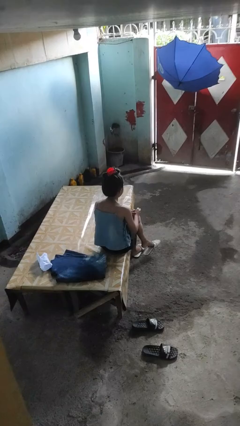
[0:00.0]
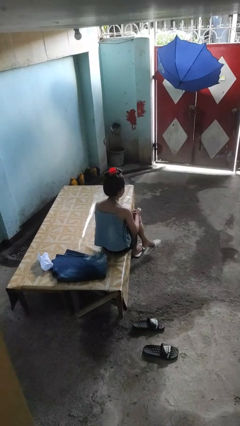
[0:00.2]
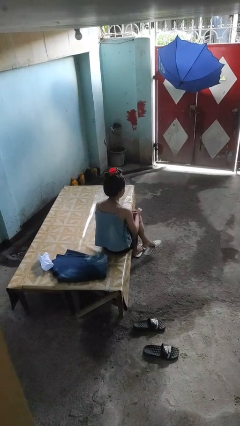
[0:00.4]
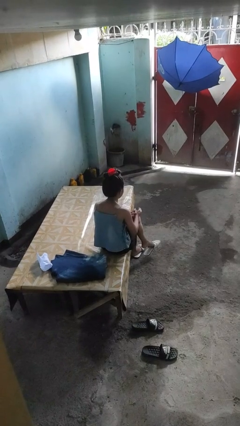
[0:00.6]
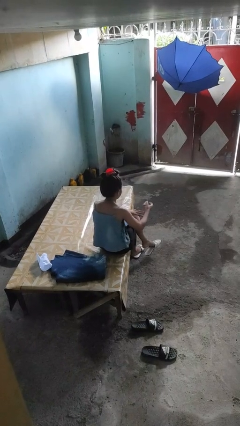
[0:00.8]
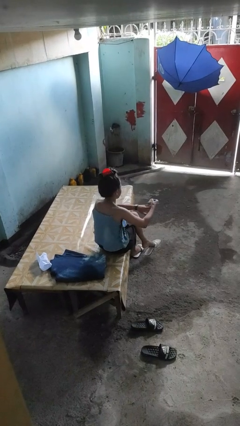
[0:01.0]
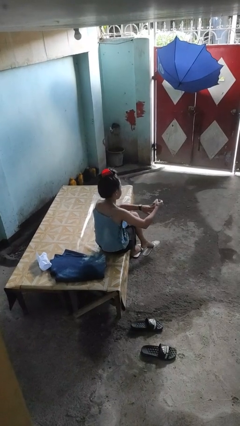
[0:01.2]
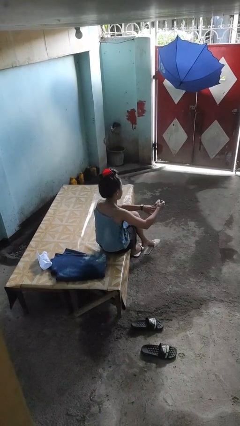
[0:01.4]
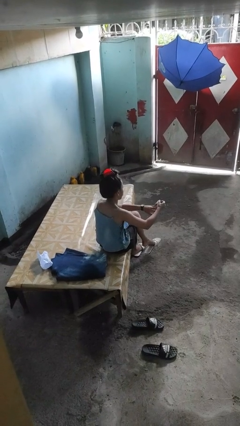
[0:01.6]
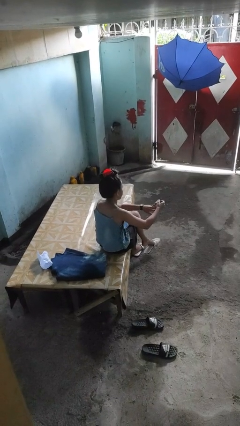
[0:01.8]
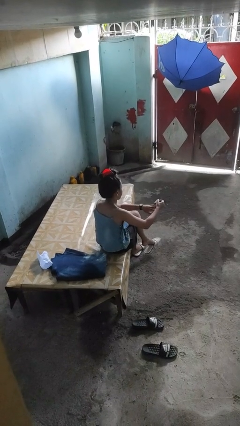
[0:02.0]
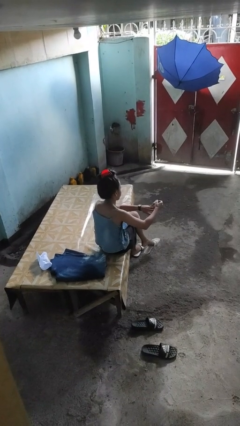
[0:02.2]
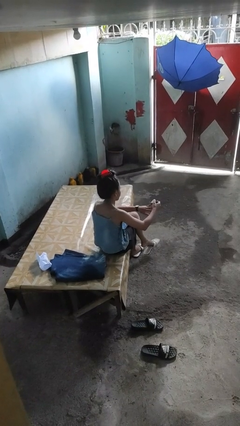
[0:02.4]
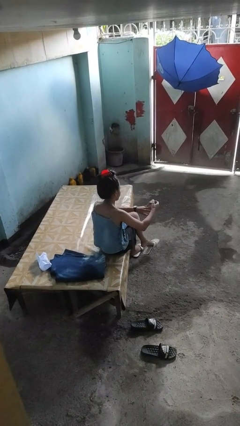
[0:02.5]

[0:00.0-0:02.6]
person clips fingernails

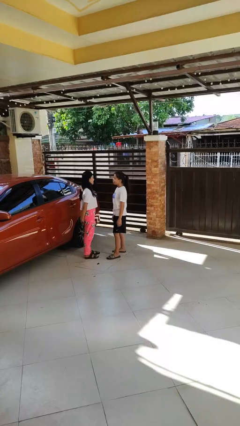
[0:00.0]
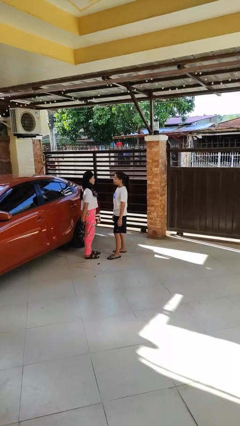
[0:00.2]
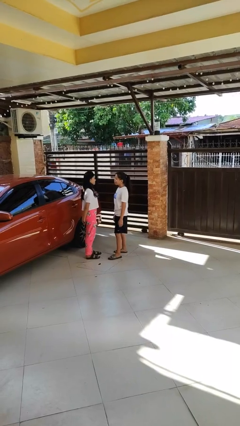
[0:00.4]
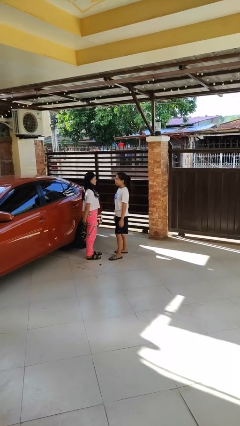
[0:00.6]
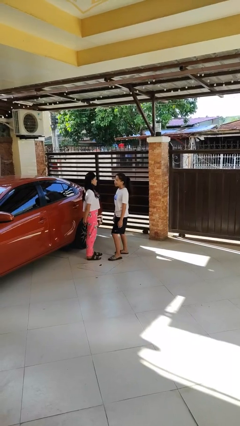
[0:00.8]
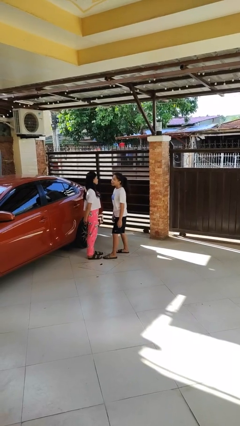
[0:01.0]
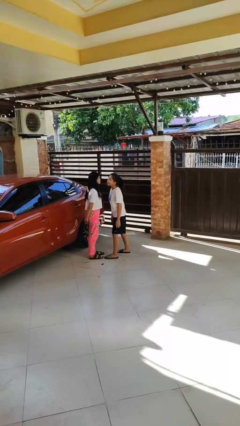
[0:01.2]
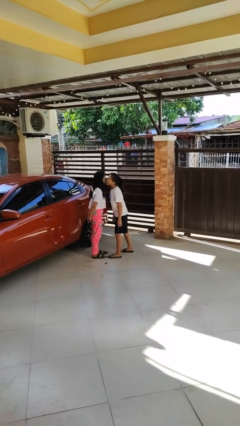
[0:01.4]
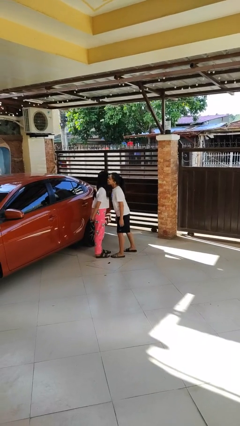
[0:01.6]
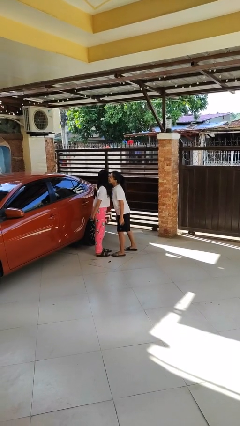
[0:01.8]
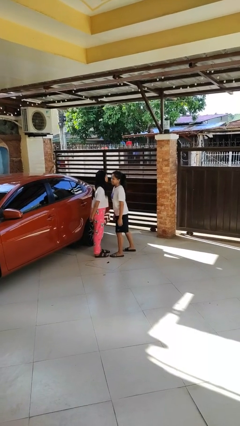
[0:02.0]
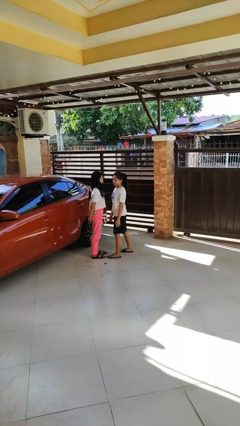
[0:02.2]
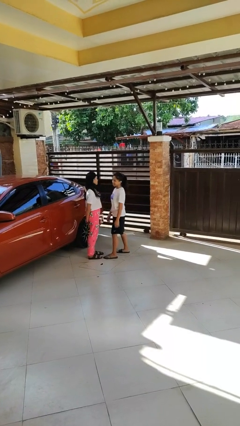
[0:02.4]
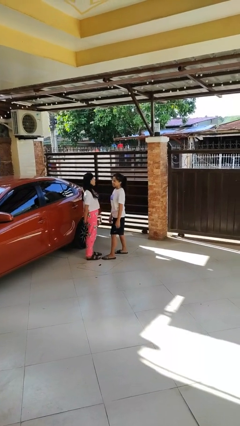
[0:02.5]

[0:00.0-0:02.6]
person kisses cheek of person

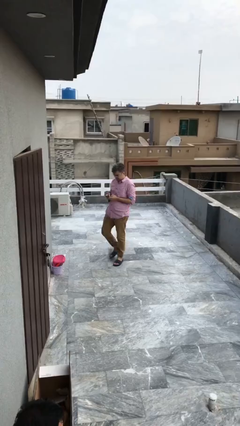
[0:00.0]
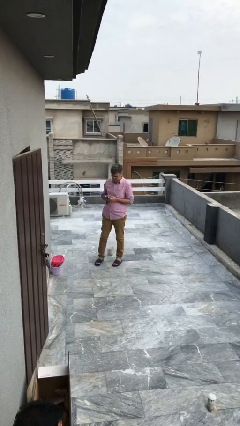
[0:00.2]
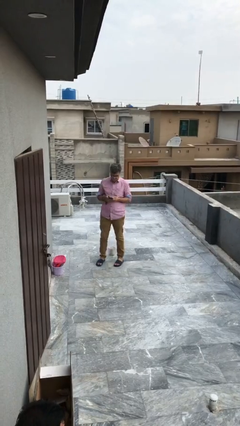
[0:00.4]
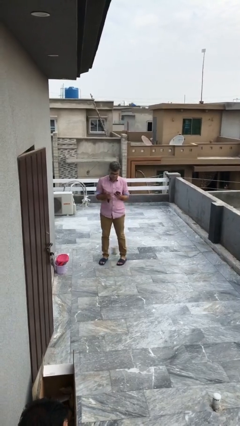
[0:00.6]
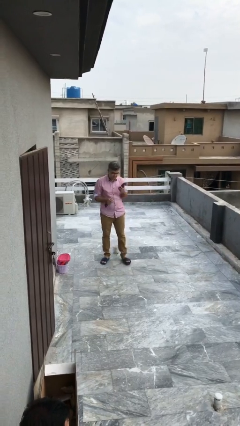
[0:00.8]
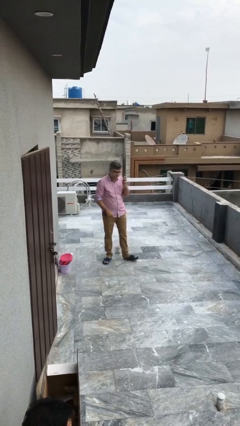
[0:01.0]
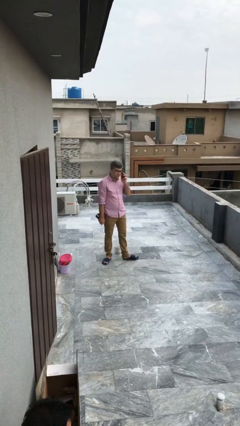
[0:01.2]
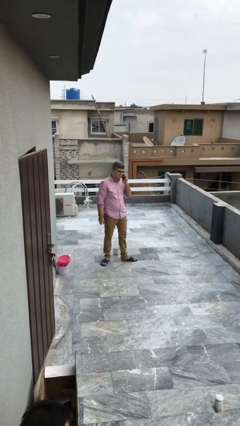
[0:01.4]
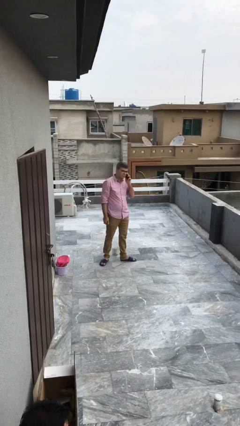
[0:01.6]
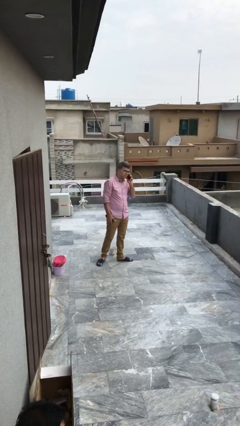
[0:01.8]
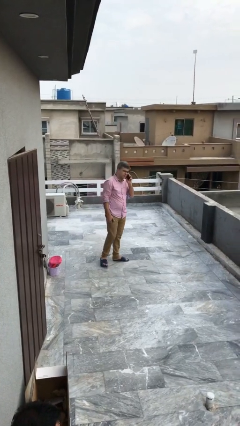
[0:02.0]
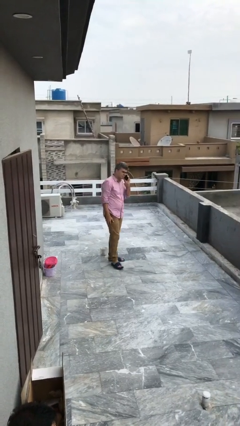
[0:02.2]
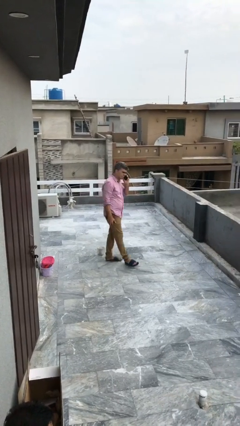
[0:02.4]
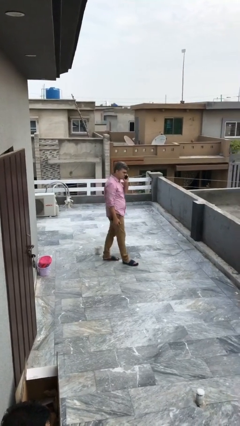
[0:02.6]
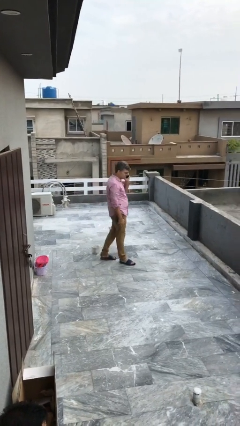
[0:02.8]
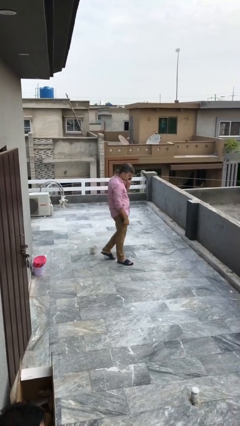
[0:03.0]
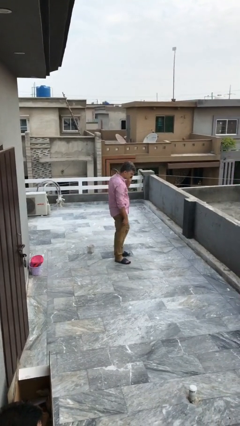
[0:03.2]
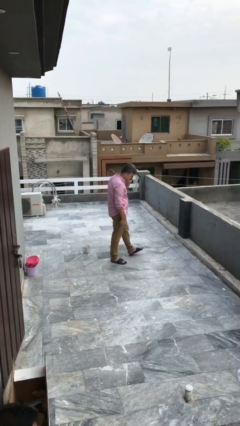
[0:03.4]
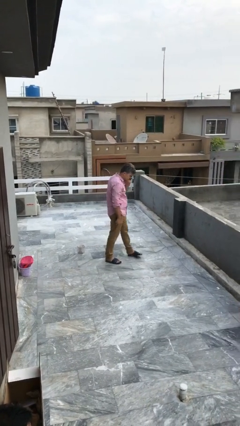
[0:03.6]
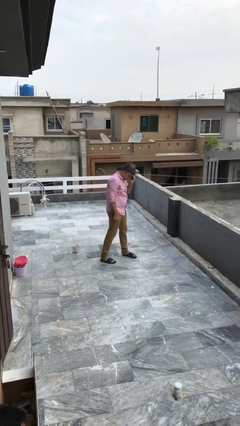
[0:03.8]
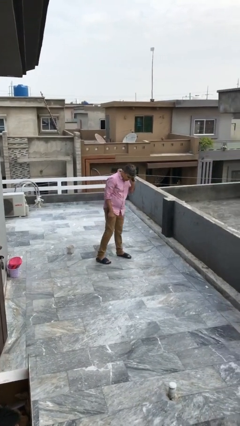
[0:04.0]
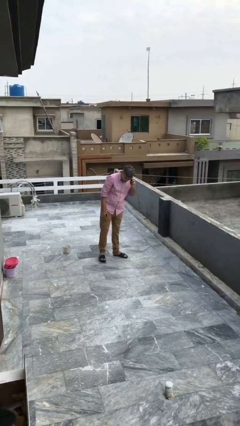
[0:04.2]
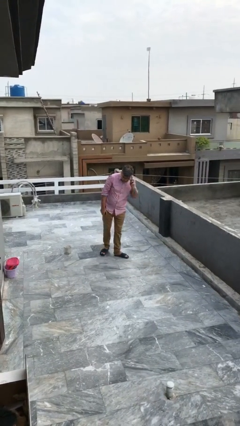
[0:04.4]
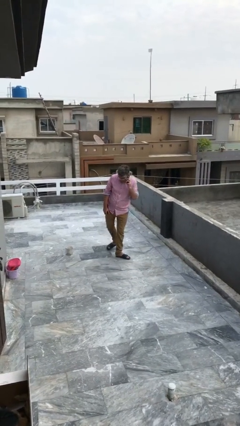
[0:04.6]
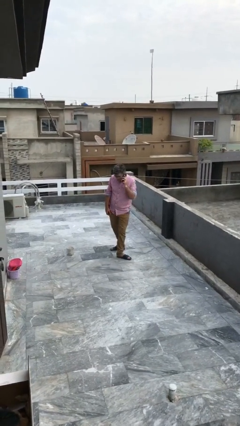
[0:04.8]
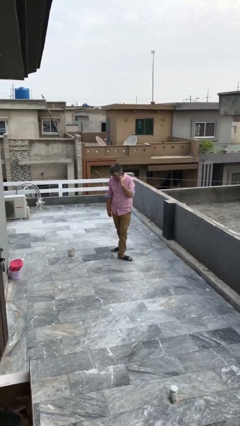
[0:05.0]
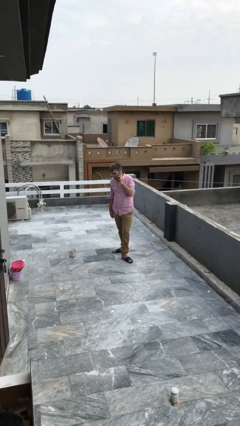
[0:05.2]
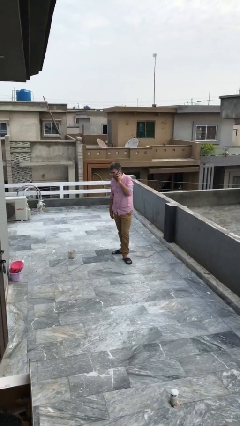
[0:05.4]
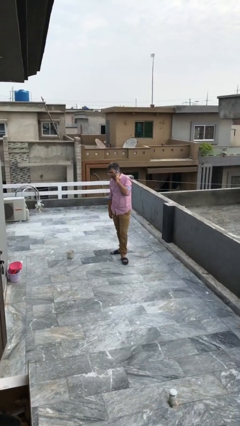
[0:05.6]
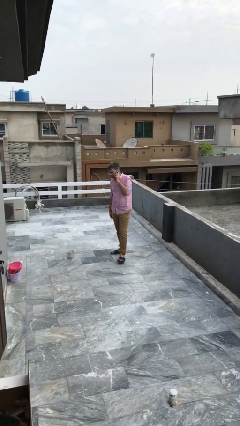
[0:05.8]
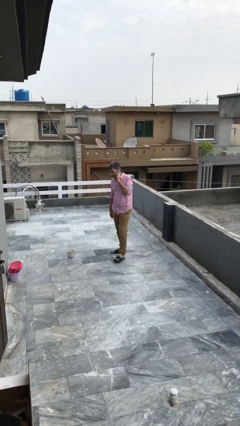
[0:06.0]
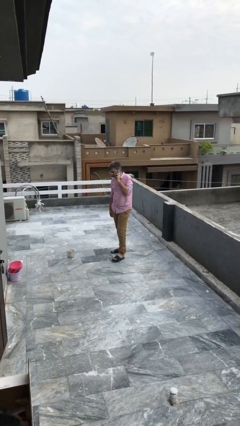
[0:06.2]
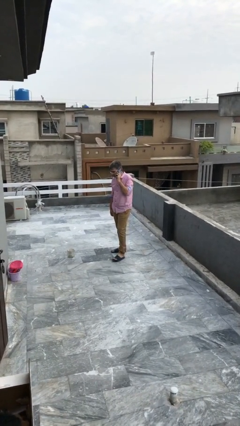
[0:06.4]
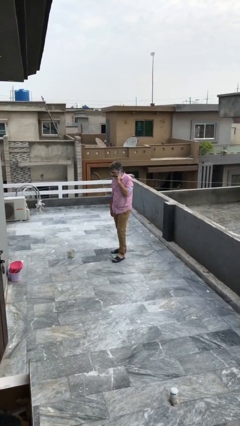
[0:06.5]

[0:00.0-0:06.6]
person talks on phone

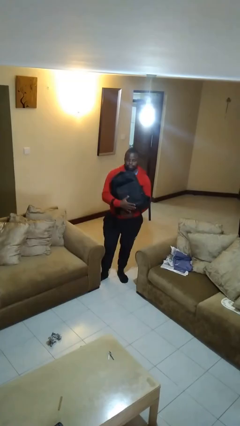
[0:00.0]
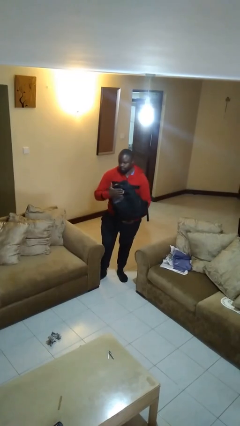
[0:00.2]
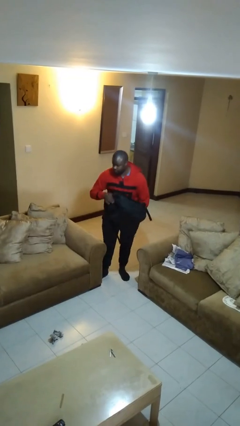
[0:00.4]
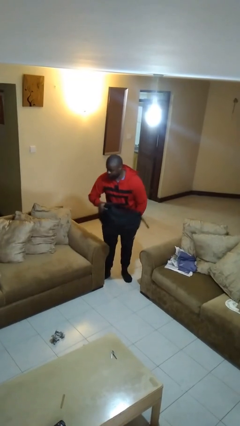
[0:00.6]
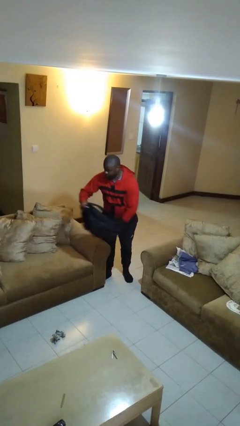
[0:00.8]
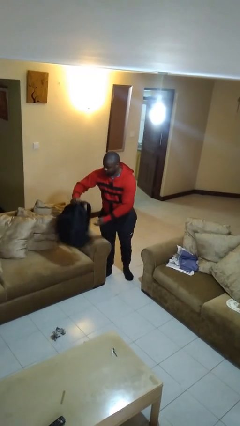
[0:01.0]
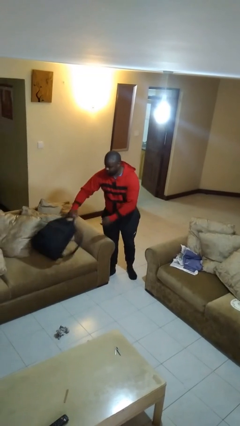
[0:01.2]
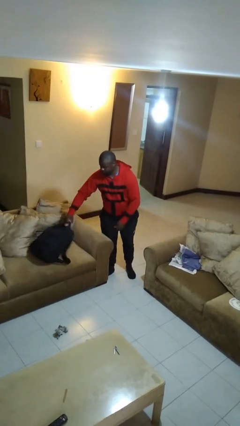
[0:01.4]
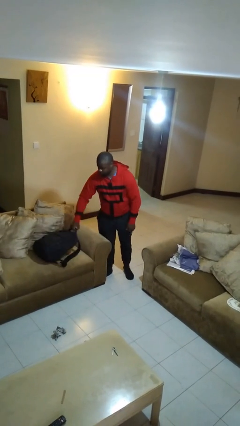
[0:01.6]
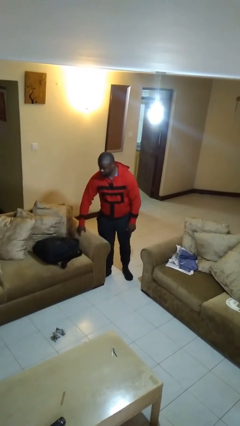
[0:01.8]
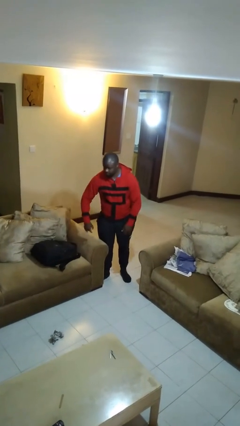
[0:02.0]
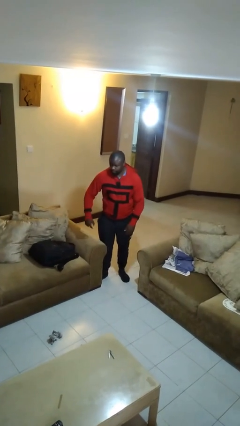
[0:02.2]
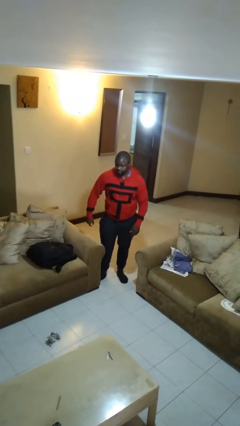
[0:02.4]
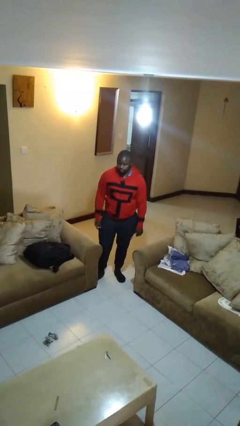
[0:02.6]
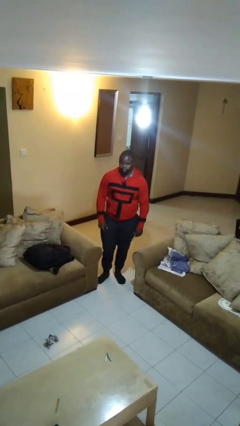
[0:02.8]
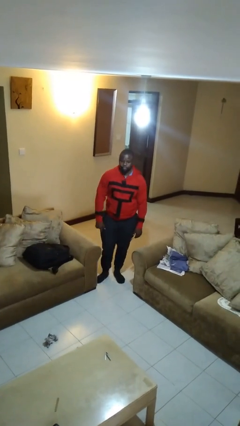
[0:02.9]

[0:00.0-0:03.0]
person puts down object on couch

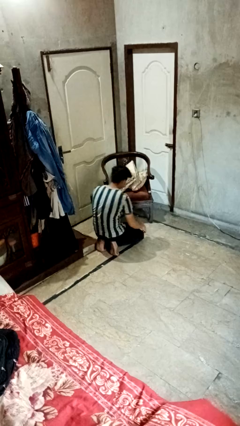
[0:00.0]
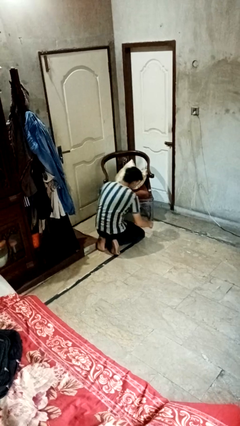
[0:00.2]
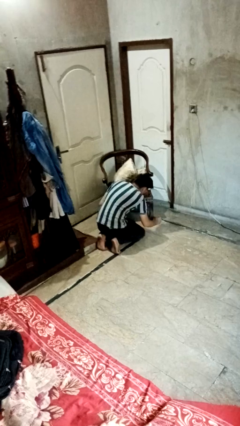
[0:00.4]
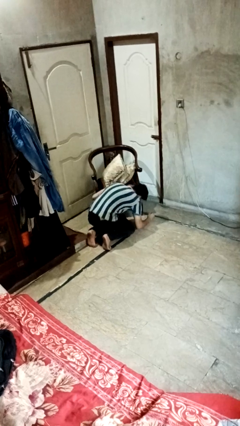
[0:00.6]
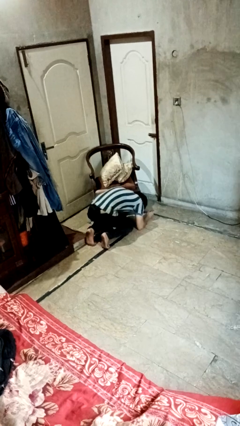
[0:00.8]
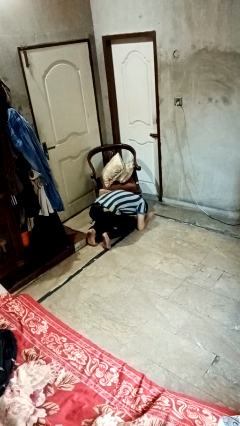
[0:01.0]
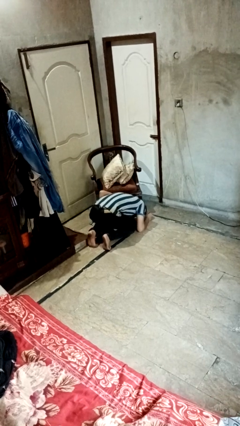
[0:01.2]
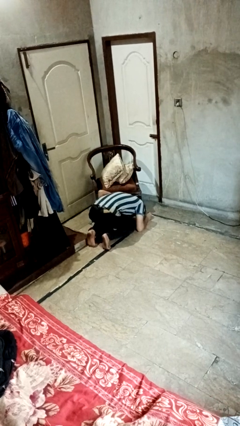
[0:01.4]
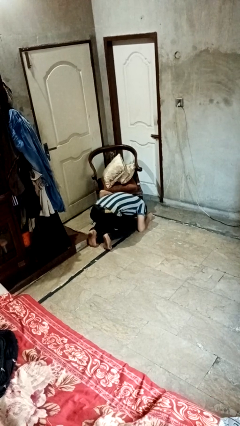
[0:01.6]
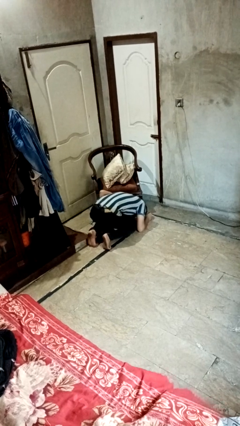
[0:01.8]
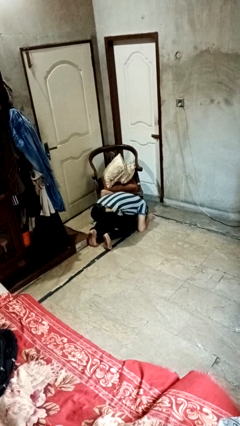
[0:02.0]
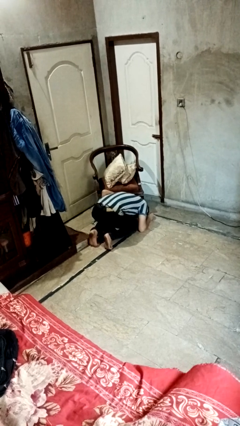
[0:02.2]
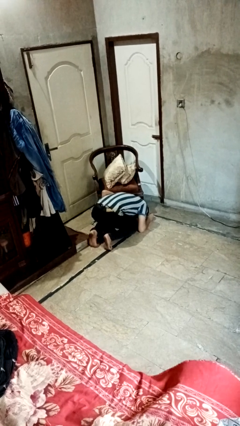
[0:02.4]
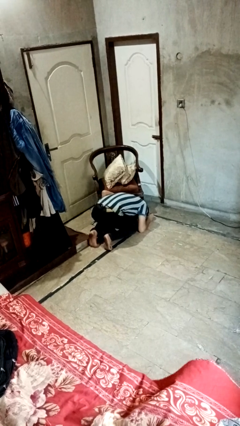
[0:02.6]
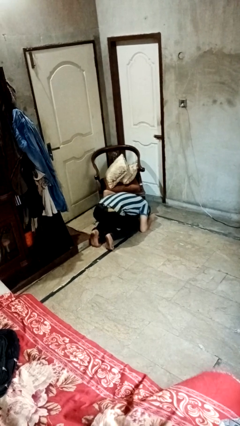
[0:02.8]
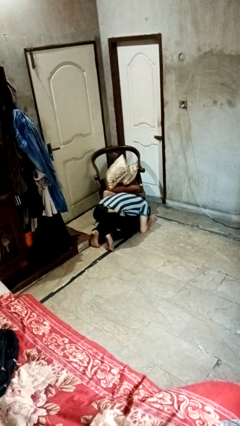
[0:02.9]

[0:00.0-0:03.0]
person searches under couch
